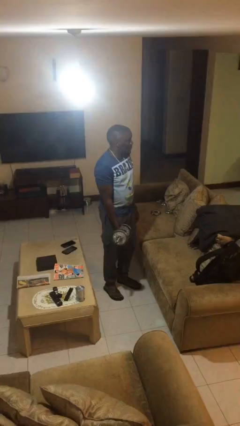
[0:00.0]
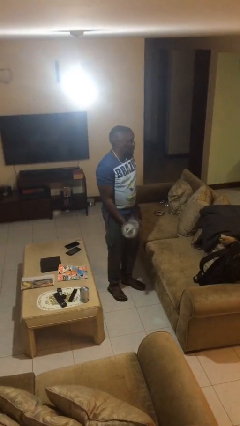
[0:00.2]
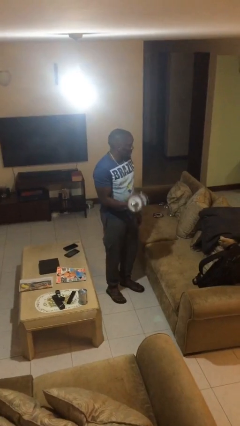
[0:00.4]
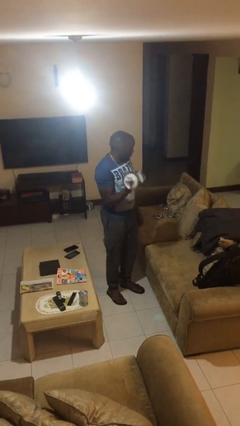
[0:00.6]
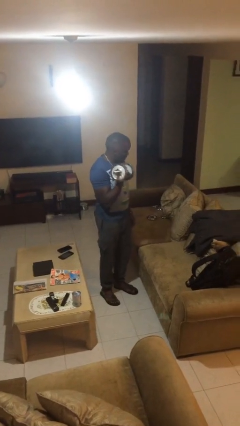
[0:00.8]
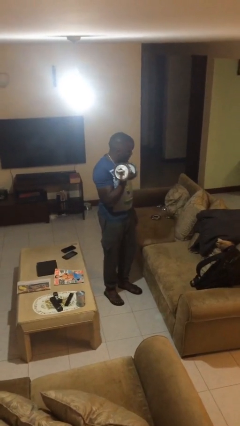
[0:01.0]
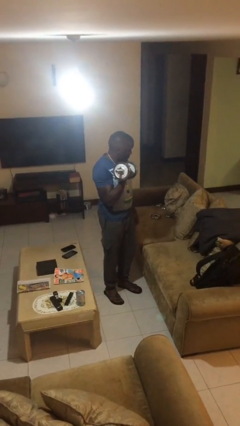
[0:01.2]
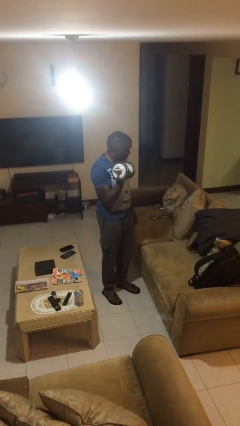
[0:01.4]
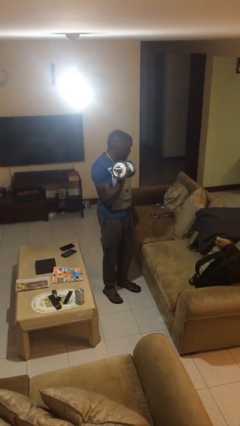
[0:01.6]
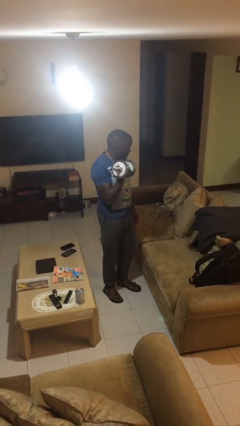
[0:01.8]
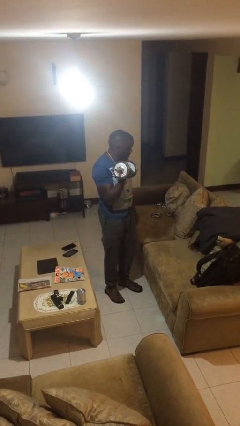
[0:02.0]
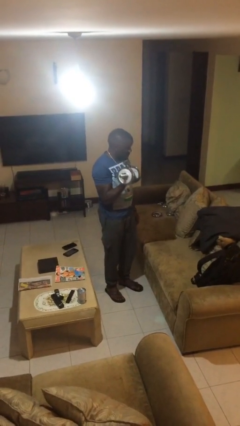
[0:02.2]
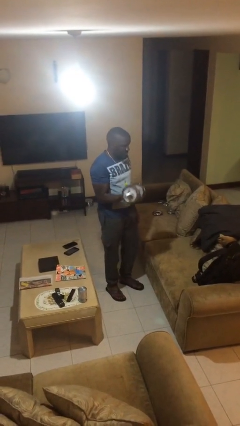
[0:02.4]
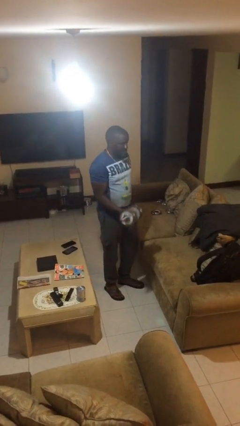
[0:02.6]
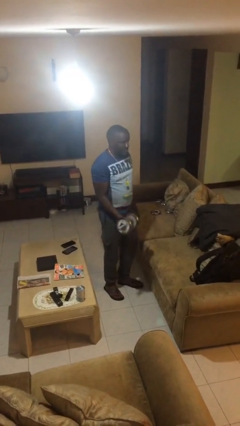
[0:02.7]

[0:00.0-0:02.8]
person lifts dumbbells

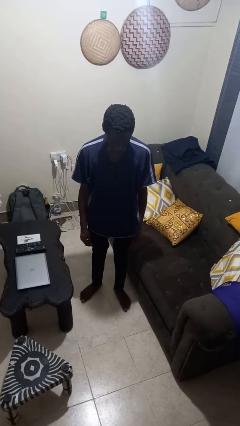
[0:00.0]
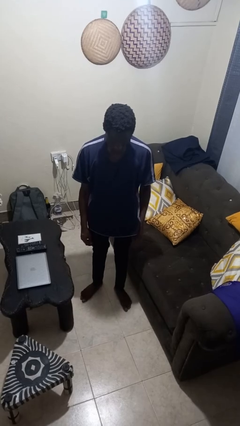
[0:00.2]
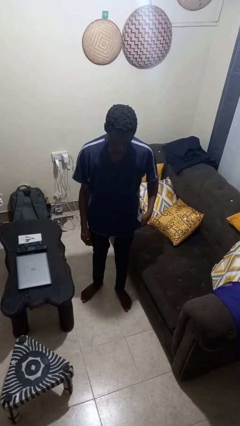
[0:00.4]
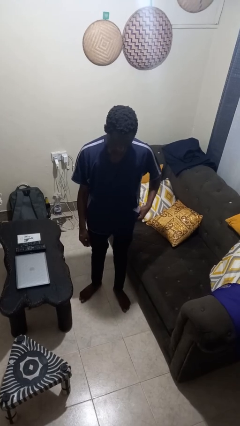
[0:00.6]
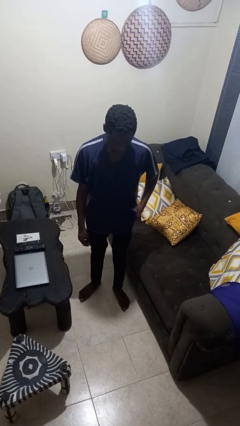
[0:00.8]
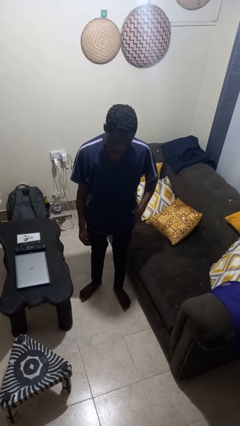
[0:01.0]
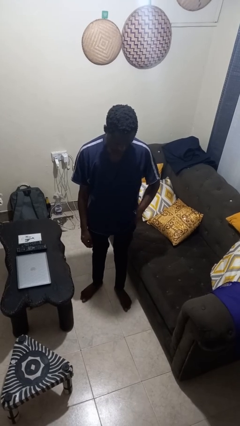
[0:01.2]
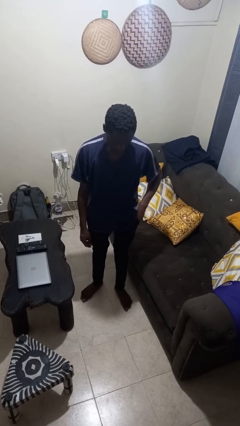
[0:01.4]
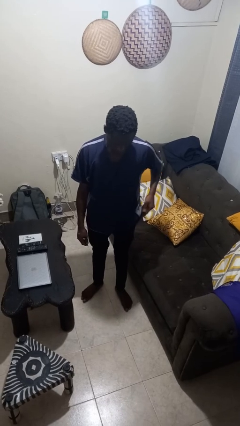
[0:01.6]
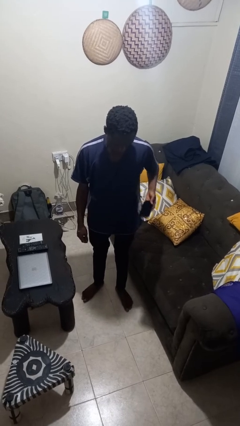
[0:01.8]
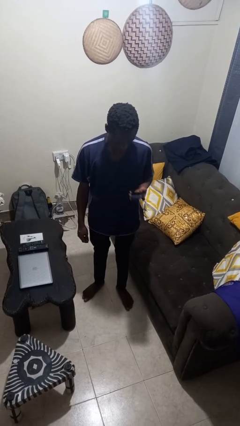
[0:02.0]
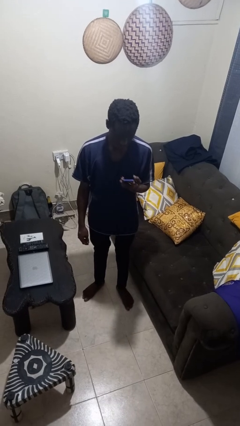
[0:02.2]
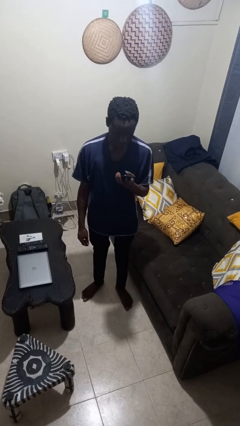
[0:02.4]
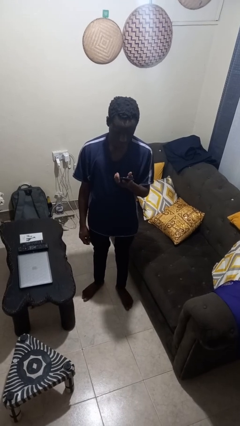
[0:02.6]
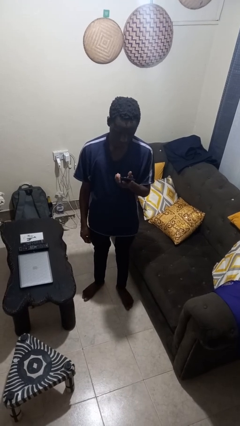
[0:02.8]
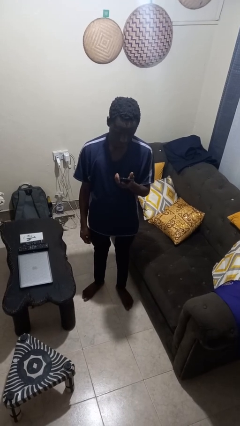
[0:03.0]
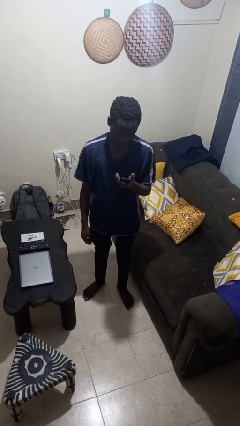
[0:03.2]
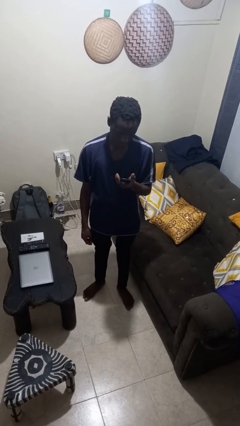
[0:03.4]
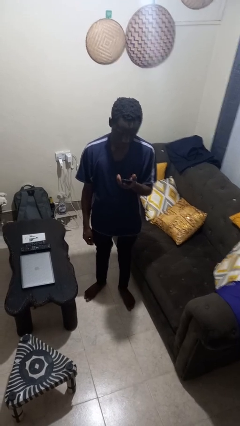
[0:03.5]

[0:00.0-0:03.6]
person takes phone from pocket

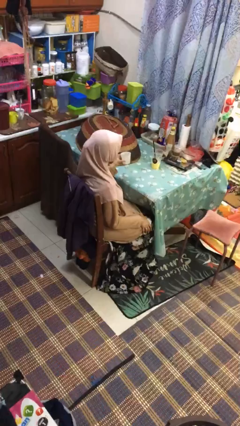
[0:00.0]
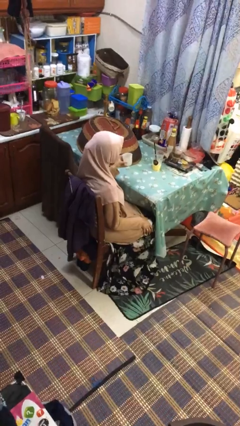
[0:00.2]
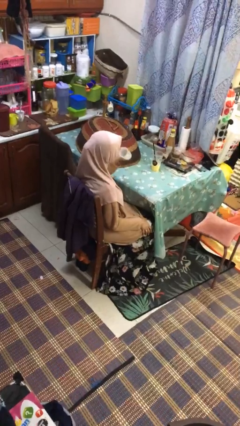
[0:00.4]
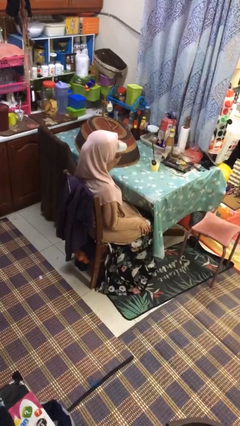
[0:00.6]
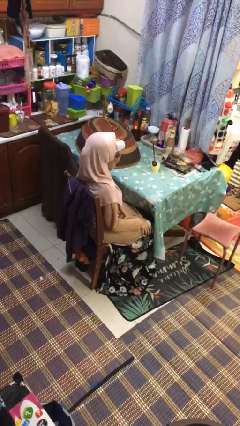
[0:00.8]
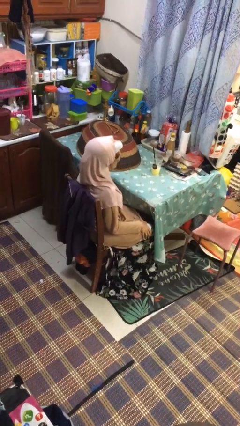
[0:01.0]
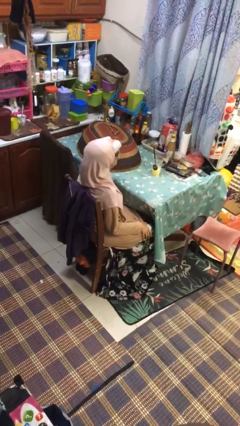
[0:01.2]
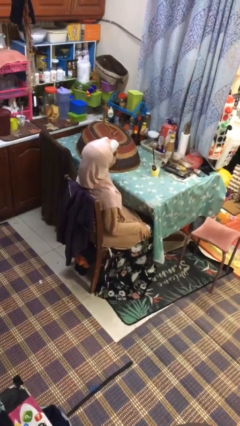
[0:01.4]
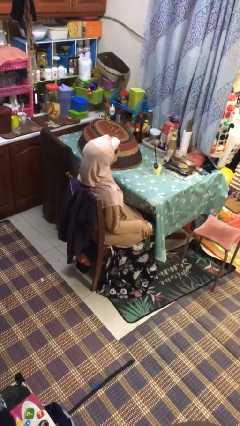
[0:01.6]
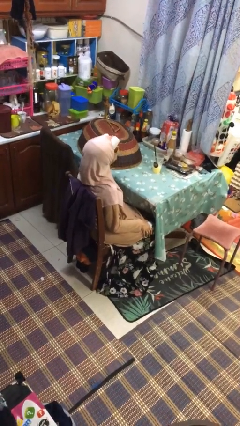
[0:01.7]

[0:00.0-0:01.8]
person drinks from shotglass

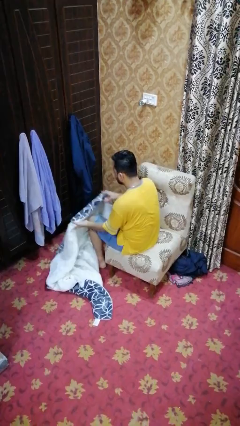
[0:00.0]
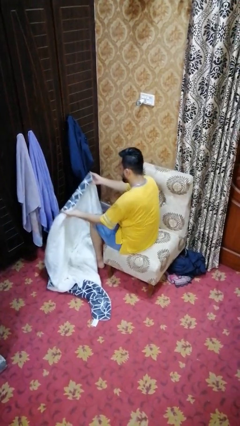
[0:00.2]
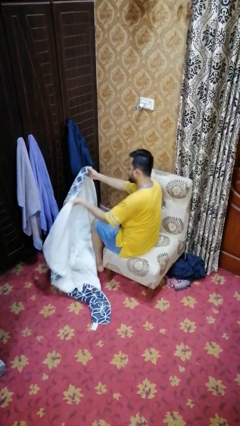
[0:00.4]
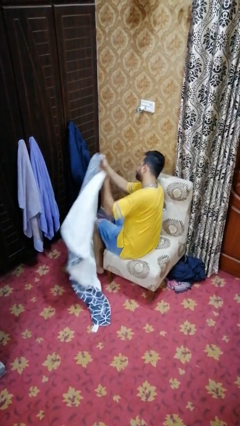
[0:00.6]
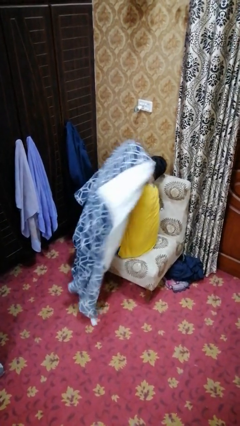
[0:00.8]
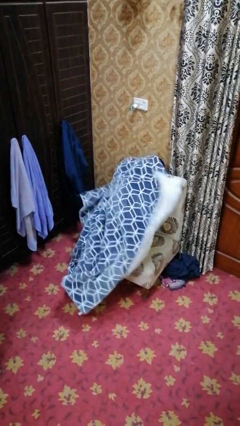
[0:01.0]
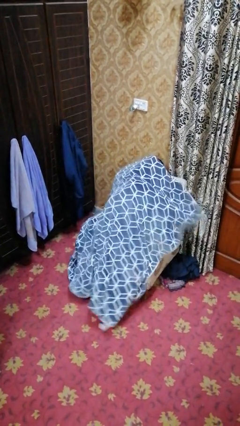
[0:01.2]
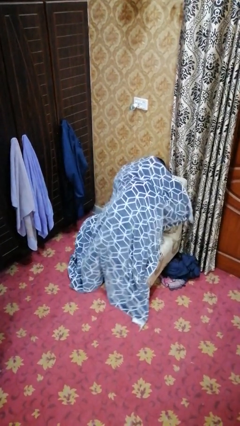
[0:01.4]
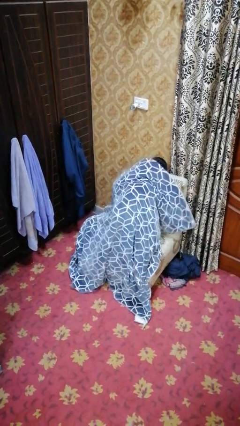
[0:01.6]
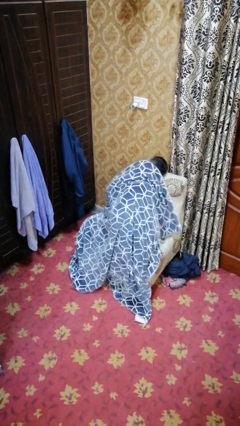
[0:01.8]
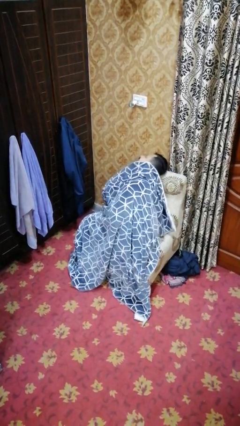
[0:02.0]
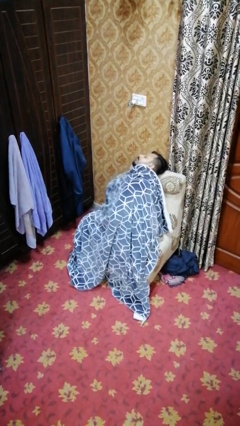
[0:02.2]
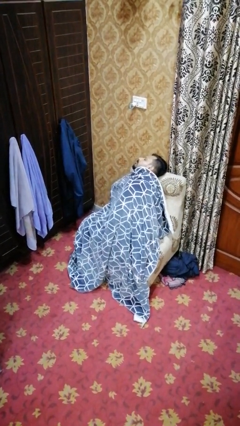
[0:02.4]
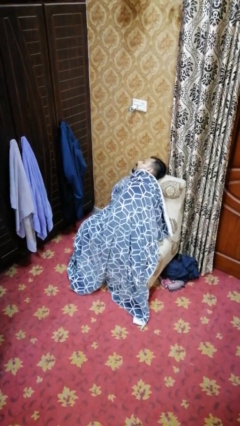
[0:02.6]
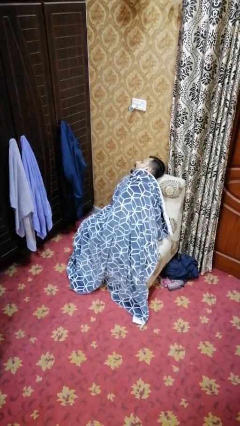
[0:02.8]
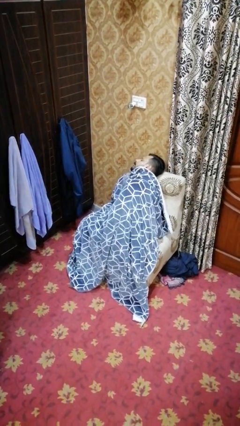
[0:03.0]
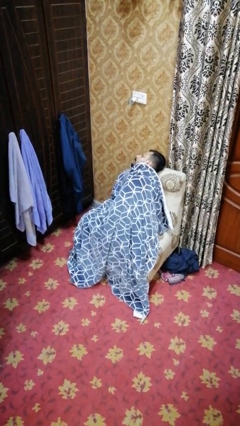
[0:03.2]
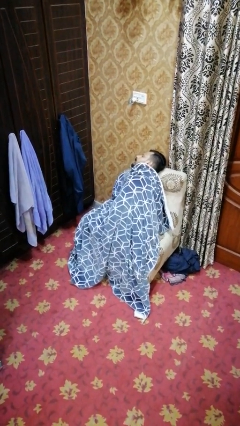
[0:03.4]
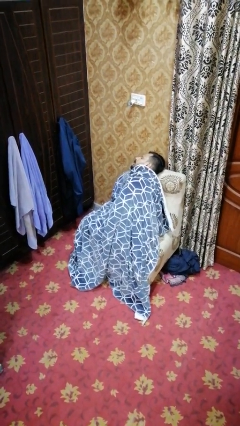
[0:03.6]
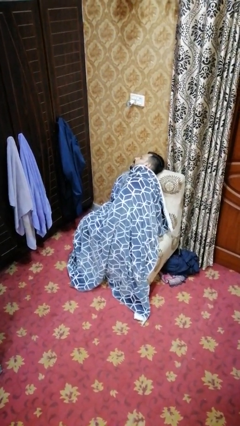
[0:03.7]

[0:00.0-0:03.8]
person covers with blanket

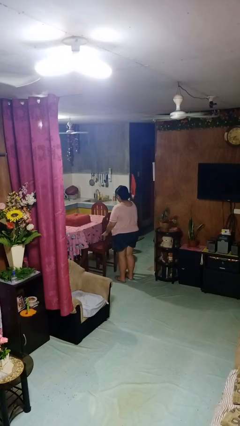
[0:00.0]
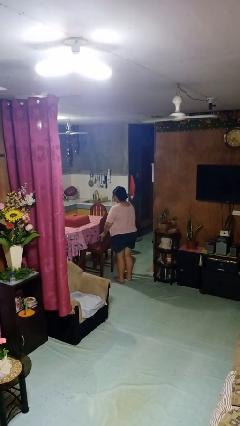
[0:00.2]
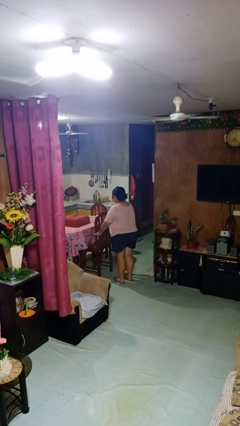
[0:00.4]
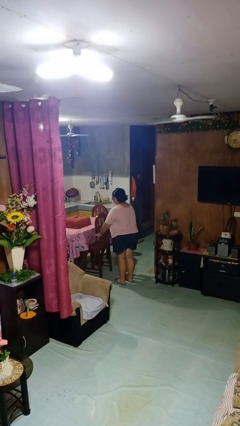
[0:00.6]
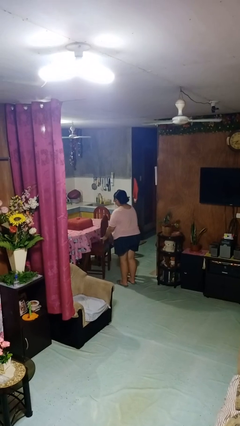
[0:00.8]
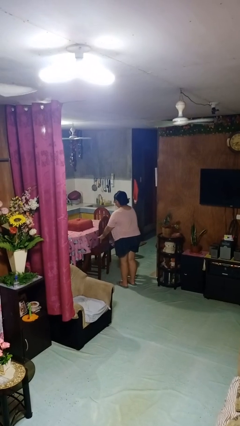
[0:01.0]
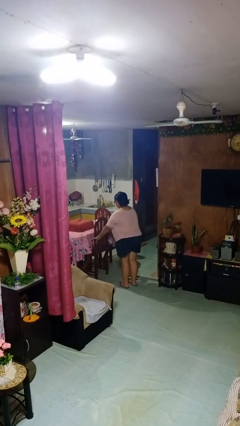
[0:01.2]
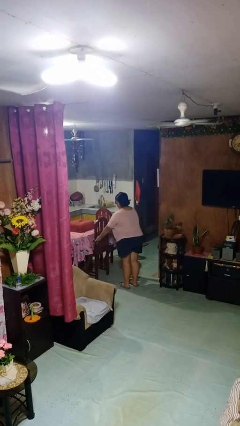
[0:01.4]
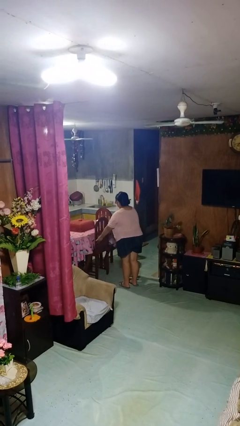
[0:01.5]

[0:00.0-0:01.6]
person pushes in chair

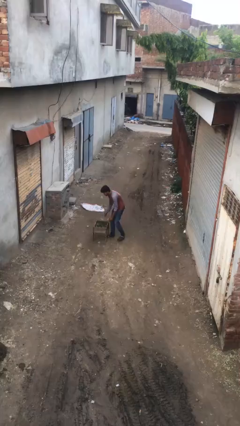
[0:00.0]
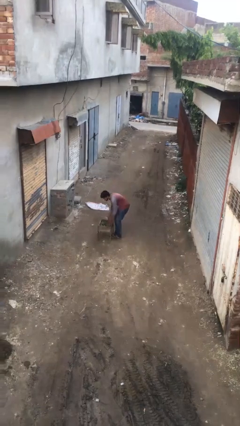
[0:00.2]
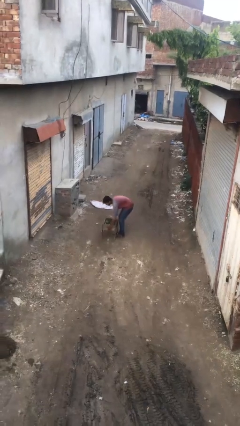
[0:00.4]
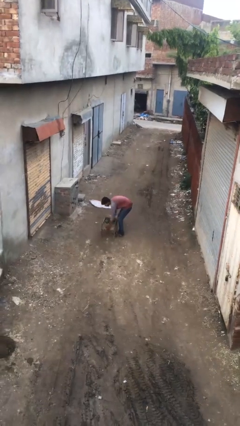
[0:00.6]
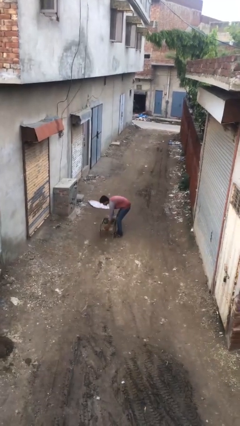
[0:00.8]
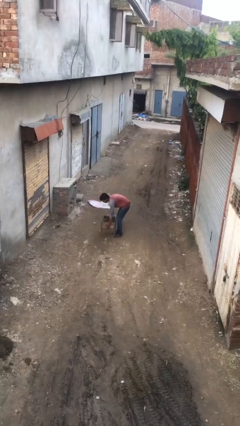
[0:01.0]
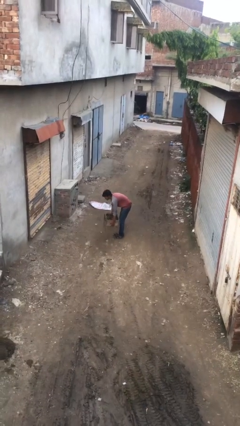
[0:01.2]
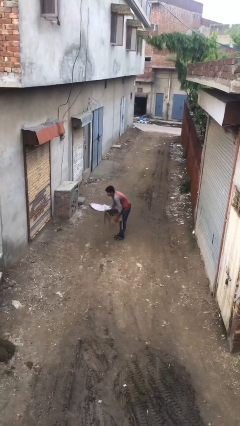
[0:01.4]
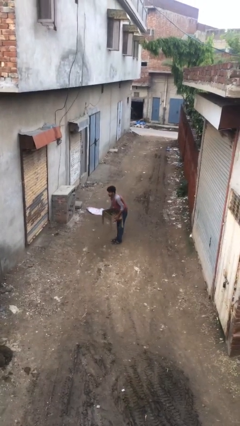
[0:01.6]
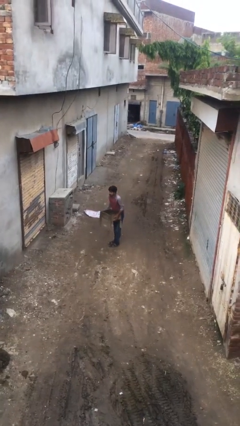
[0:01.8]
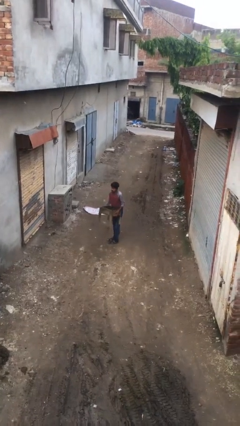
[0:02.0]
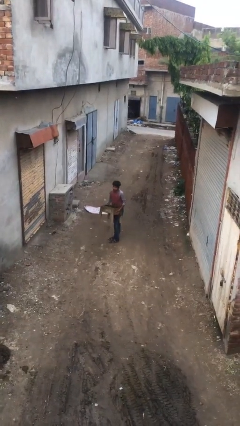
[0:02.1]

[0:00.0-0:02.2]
person picks up object from floor

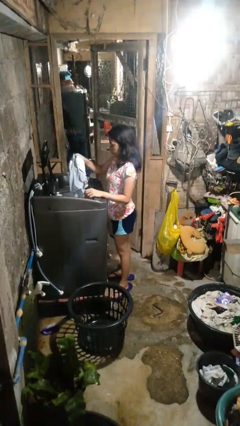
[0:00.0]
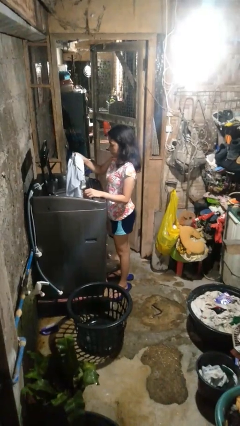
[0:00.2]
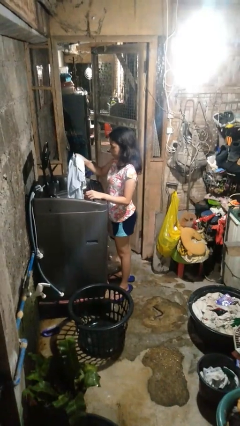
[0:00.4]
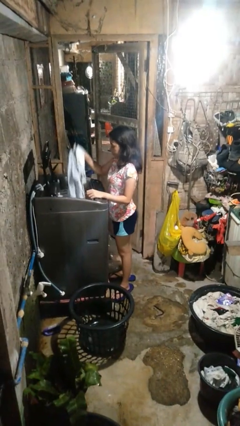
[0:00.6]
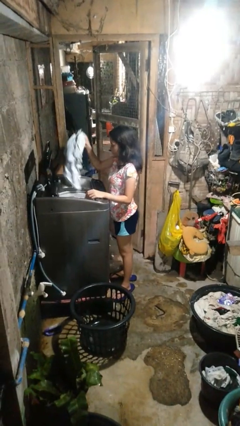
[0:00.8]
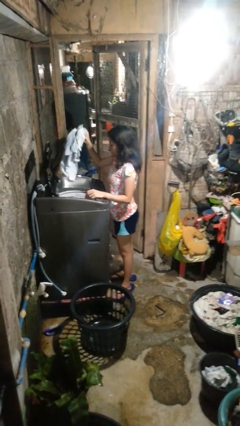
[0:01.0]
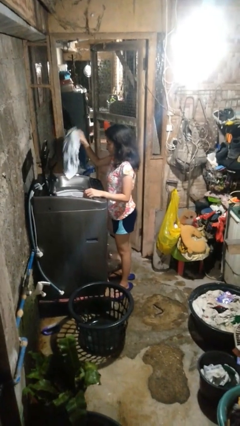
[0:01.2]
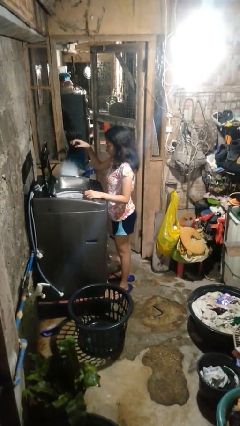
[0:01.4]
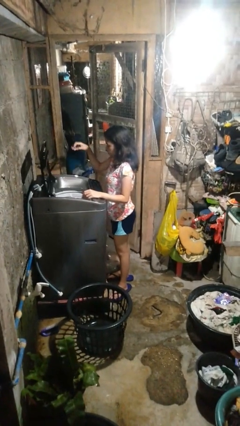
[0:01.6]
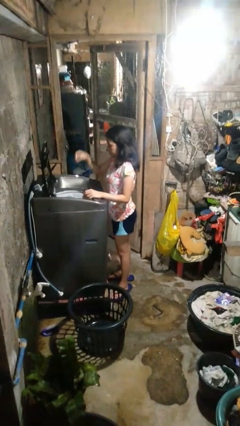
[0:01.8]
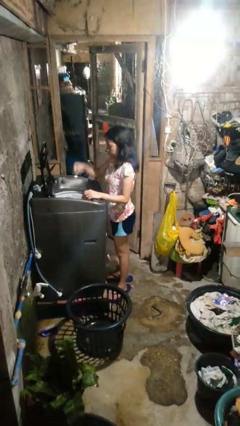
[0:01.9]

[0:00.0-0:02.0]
person loads dryer
